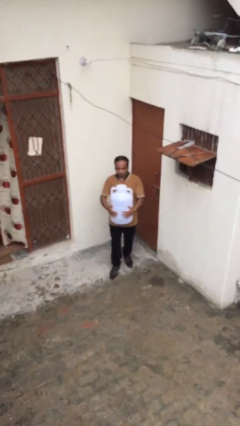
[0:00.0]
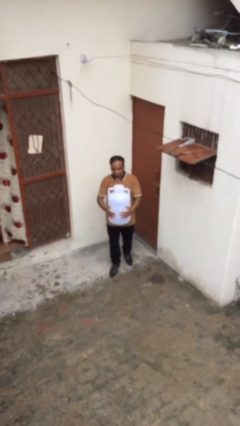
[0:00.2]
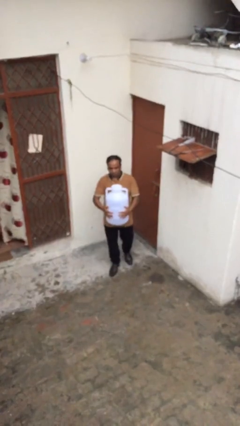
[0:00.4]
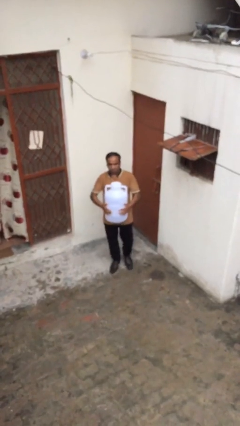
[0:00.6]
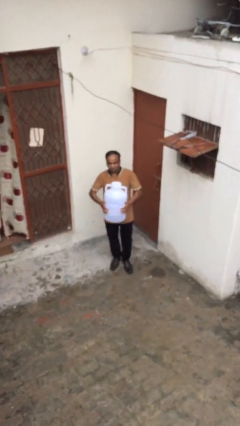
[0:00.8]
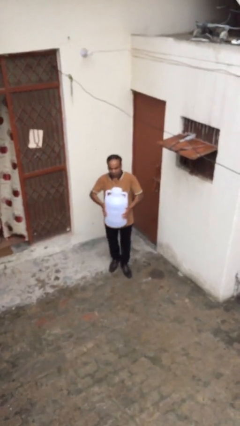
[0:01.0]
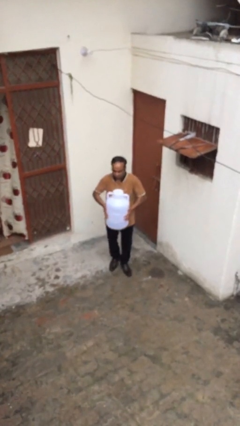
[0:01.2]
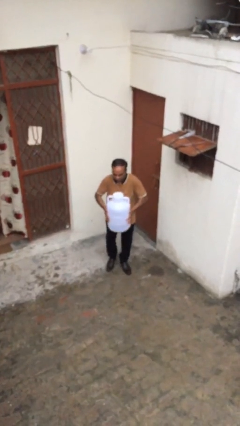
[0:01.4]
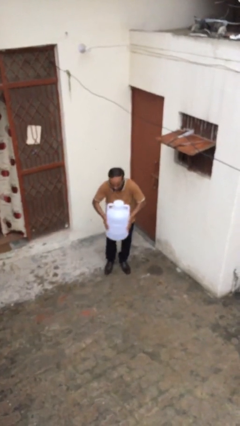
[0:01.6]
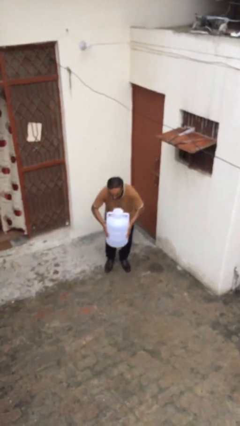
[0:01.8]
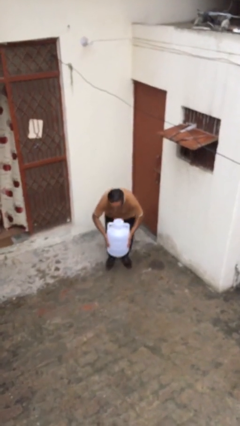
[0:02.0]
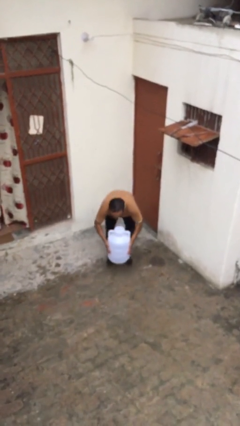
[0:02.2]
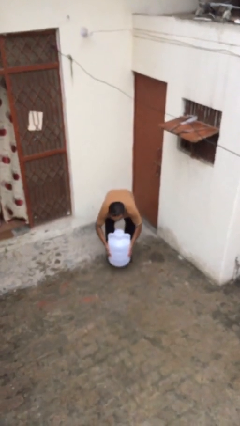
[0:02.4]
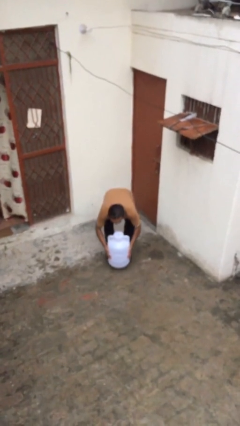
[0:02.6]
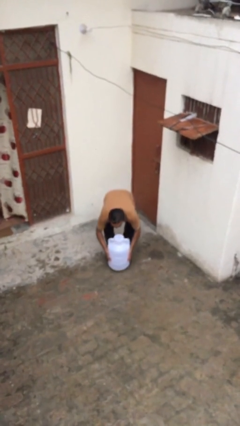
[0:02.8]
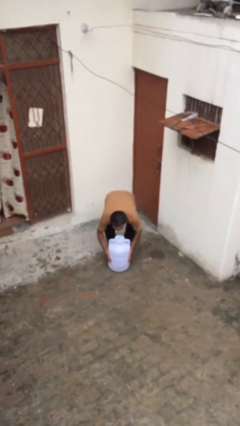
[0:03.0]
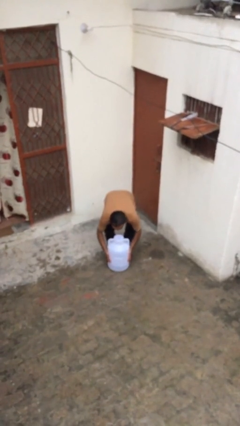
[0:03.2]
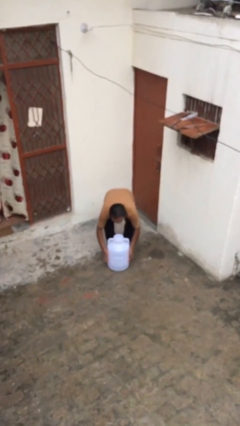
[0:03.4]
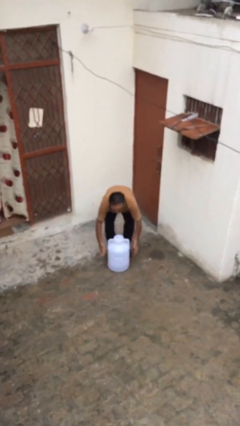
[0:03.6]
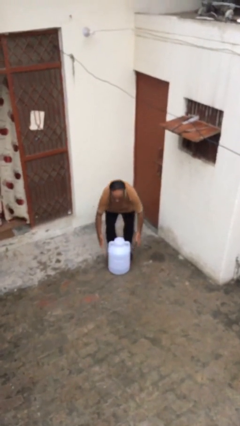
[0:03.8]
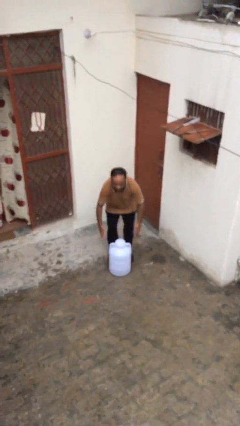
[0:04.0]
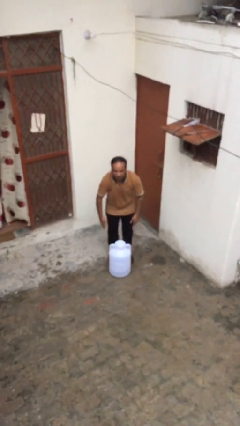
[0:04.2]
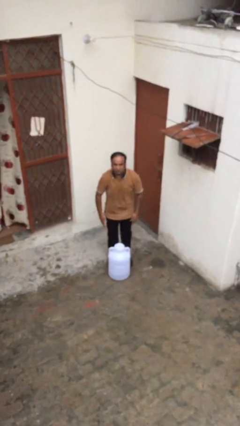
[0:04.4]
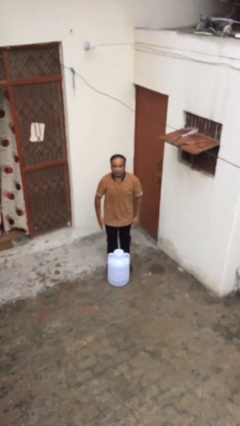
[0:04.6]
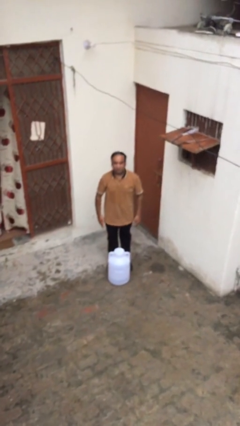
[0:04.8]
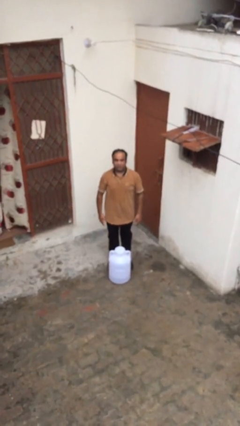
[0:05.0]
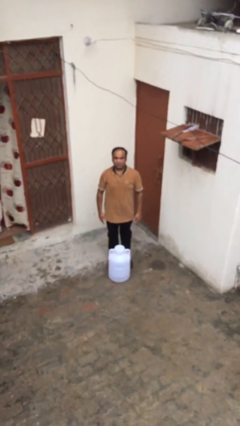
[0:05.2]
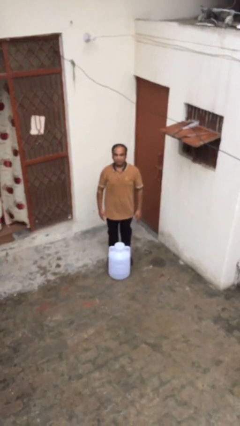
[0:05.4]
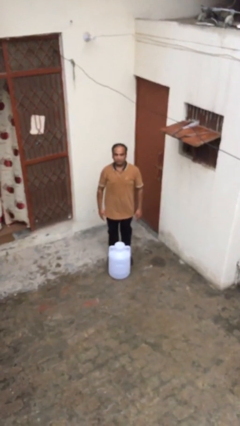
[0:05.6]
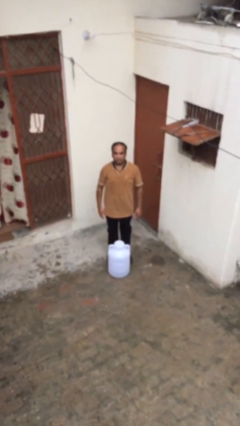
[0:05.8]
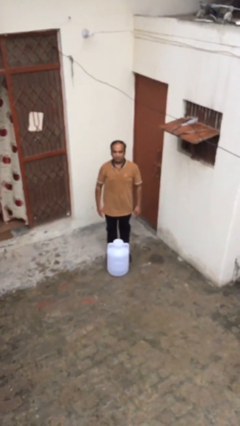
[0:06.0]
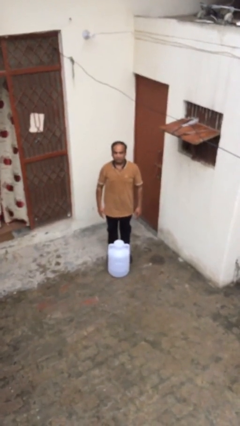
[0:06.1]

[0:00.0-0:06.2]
person puts down object on floor

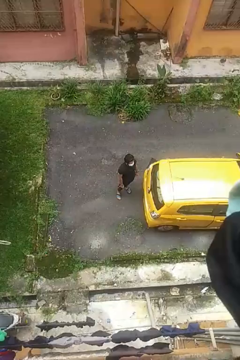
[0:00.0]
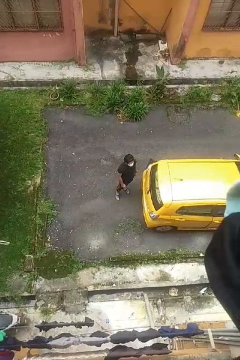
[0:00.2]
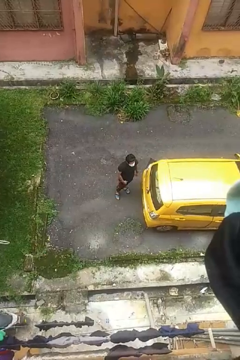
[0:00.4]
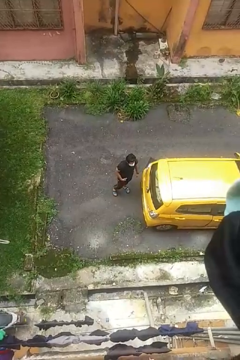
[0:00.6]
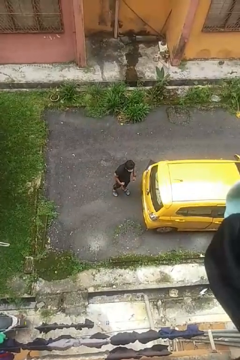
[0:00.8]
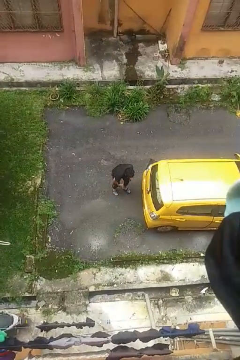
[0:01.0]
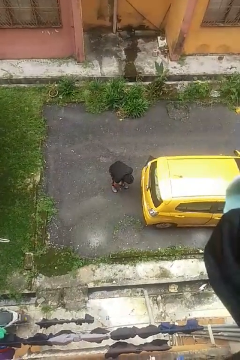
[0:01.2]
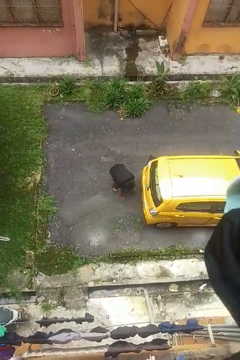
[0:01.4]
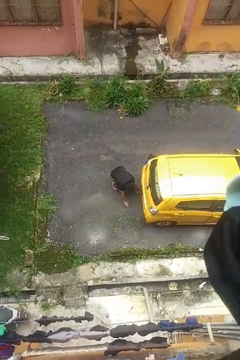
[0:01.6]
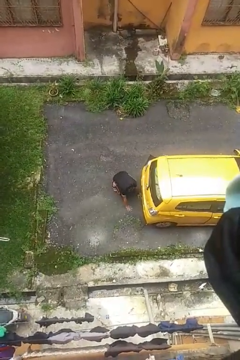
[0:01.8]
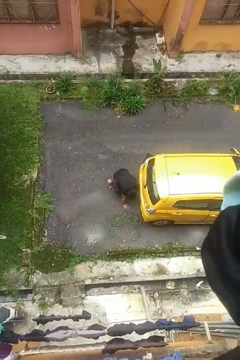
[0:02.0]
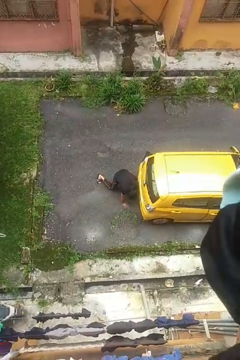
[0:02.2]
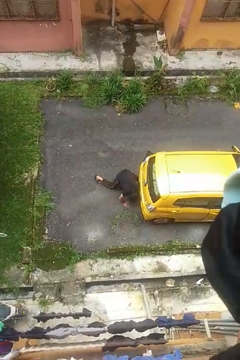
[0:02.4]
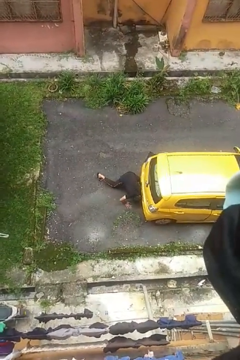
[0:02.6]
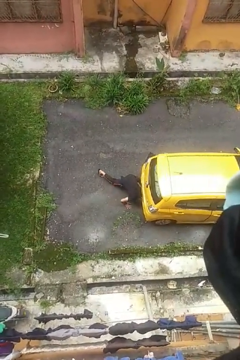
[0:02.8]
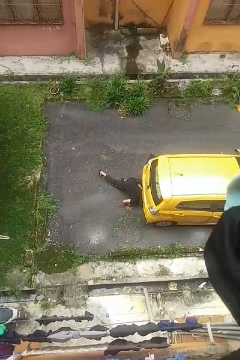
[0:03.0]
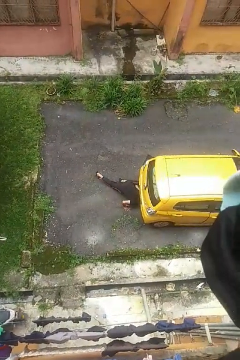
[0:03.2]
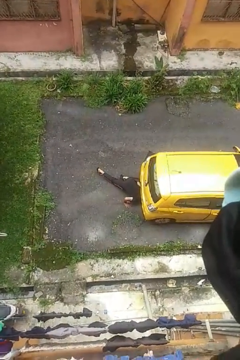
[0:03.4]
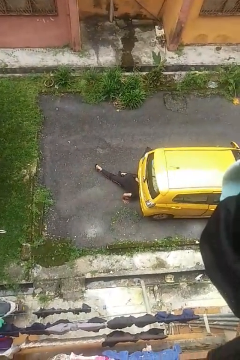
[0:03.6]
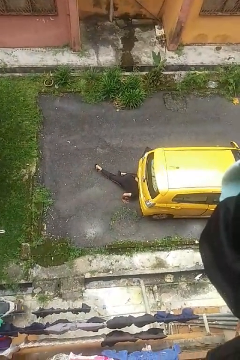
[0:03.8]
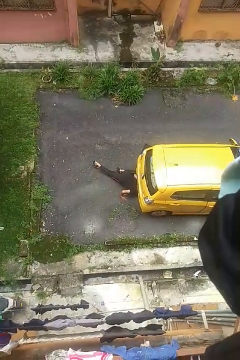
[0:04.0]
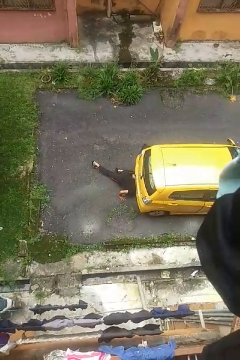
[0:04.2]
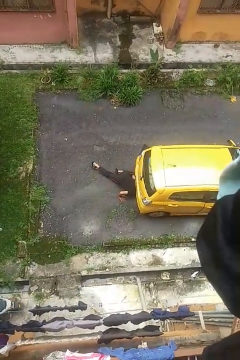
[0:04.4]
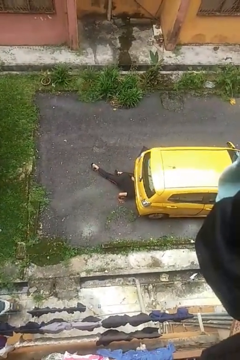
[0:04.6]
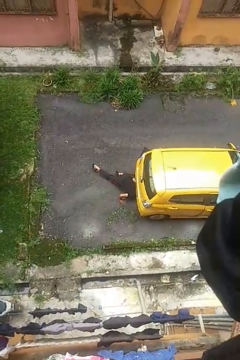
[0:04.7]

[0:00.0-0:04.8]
person crawls out from under vehicle

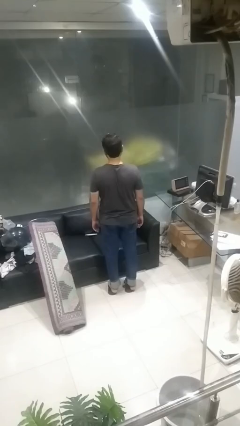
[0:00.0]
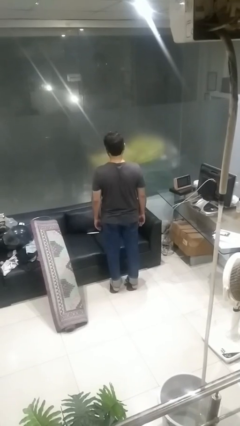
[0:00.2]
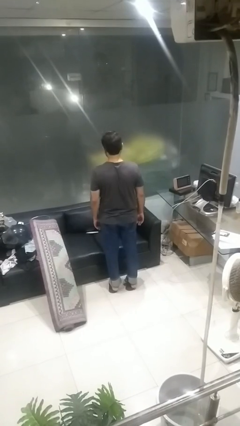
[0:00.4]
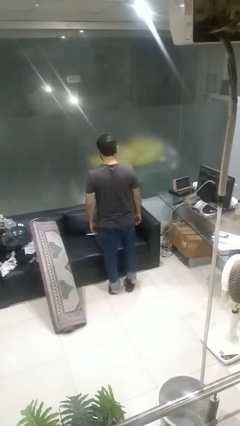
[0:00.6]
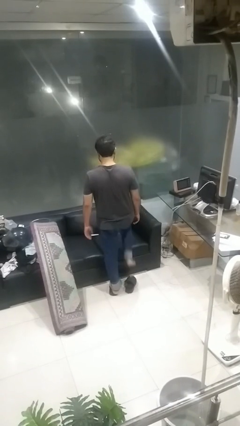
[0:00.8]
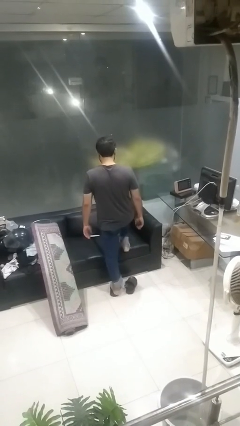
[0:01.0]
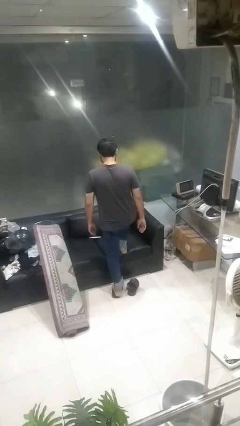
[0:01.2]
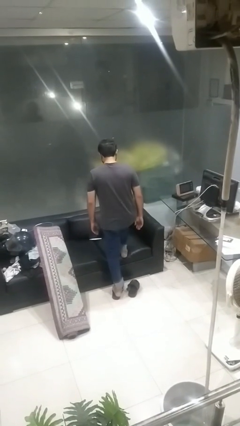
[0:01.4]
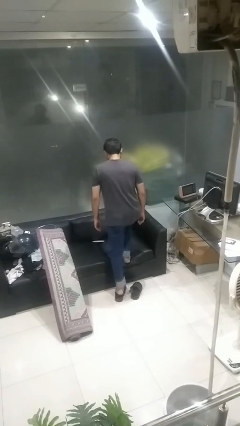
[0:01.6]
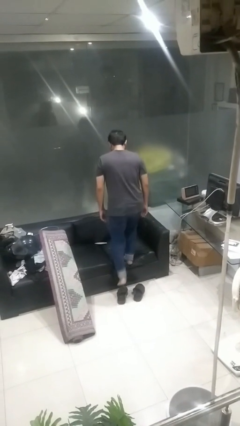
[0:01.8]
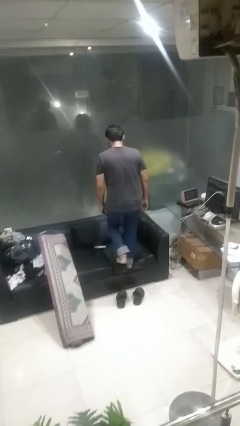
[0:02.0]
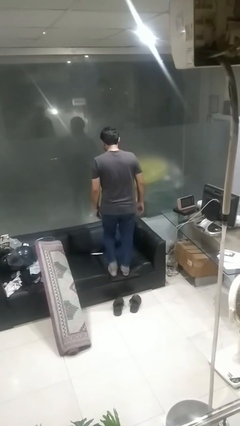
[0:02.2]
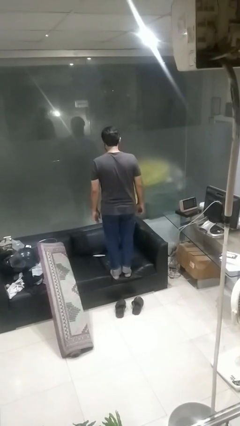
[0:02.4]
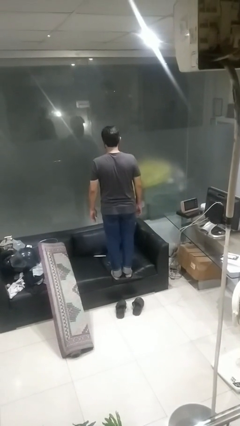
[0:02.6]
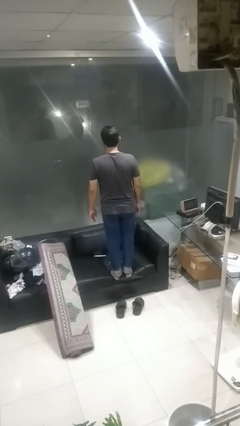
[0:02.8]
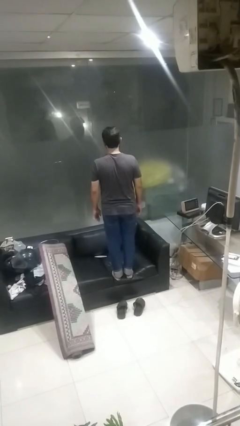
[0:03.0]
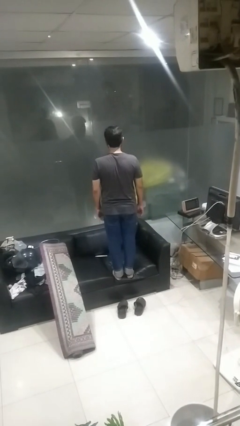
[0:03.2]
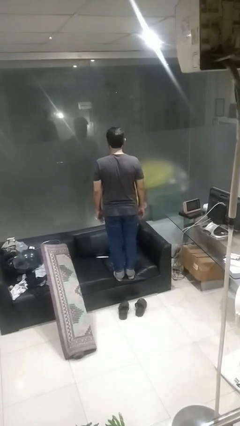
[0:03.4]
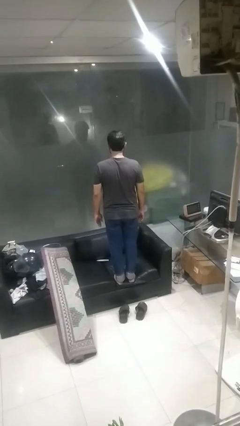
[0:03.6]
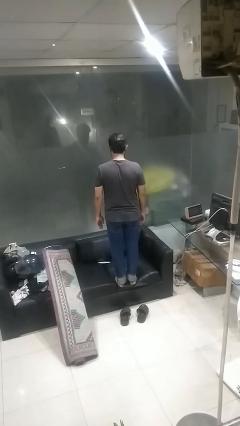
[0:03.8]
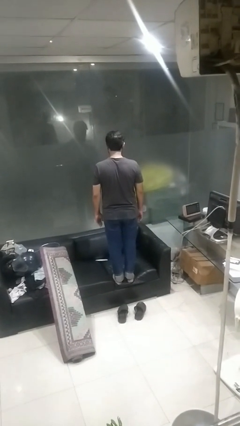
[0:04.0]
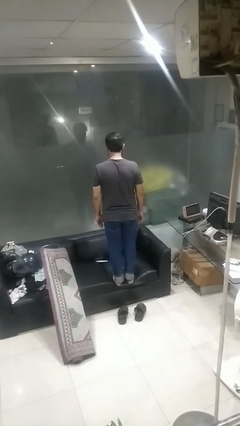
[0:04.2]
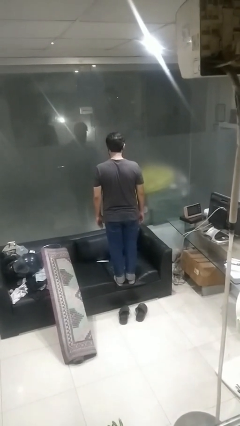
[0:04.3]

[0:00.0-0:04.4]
person climbs on couch

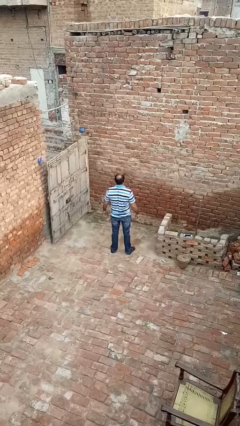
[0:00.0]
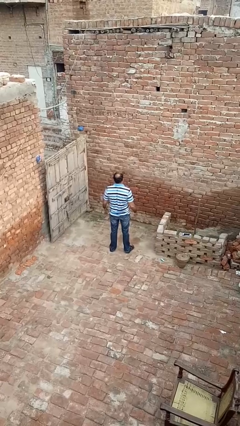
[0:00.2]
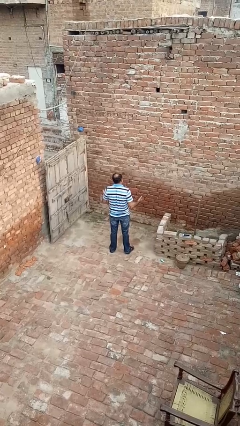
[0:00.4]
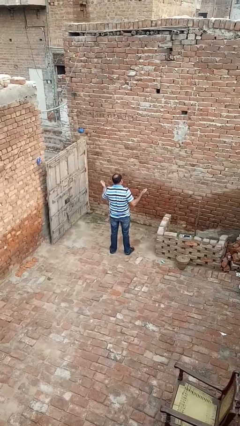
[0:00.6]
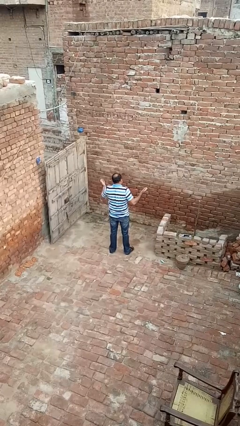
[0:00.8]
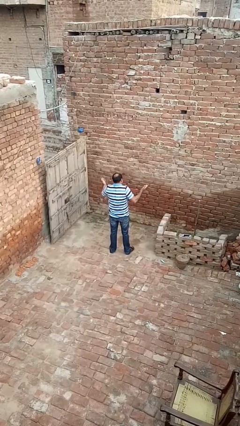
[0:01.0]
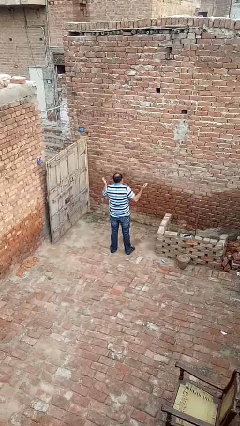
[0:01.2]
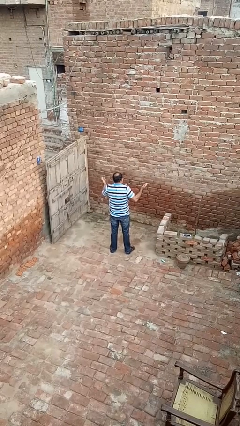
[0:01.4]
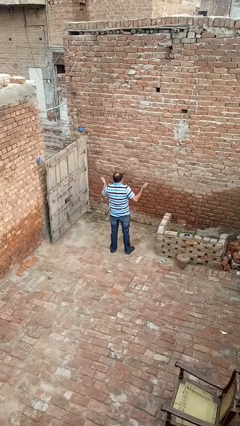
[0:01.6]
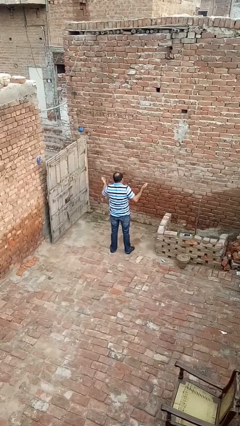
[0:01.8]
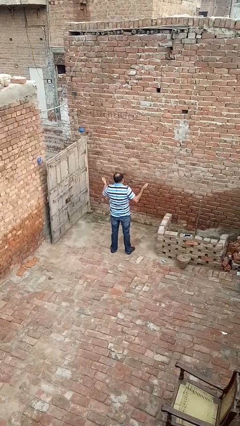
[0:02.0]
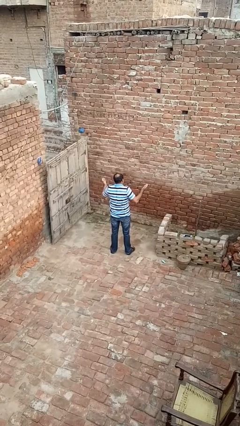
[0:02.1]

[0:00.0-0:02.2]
person shrugs

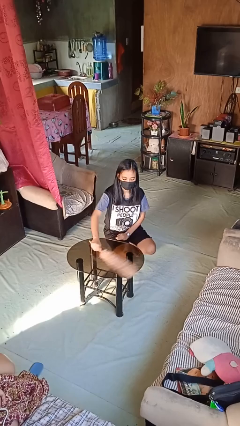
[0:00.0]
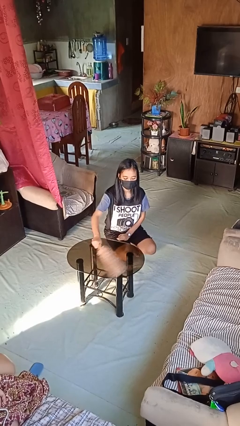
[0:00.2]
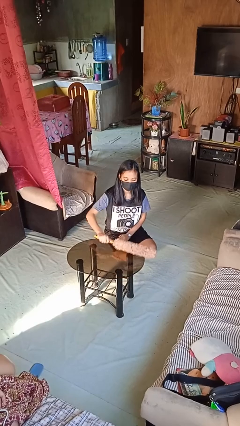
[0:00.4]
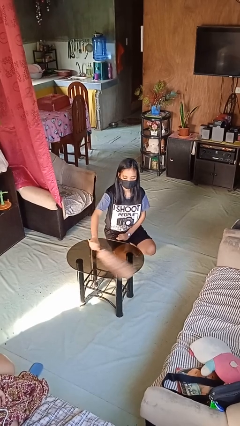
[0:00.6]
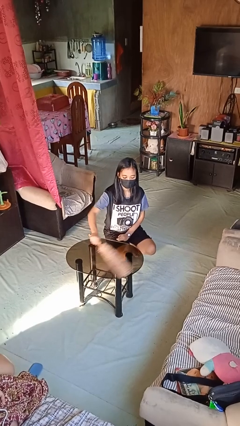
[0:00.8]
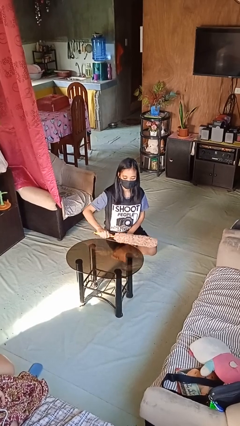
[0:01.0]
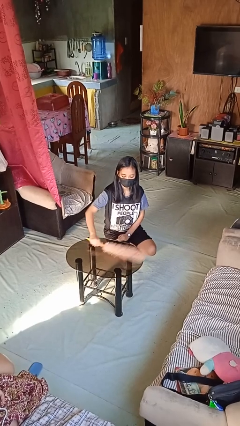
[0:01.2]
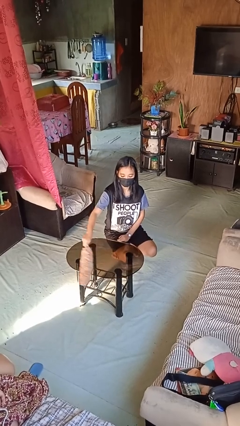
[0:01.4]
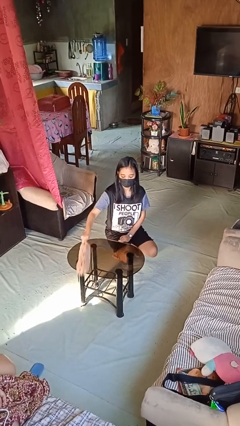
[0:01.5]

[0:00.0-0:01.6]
person dusts furniture
